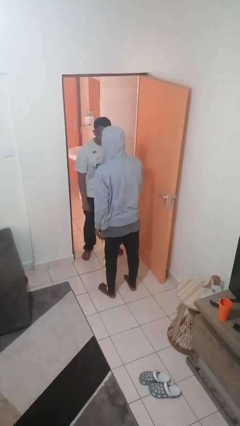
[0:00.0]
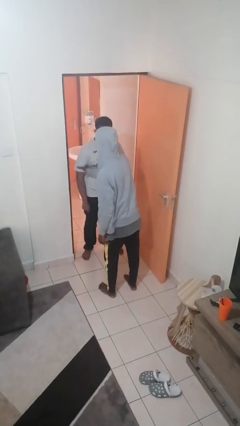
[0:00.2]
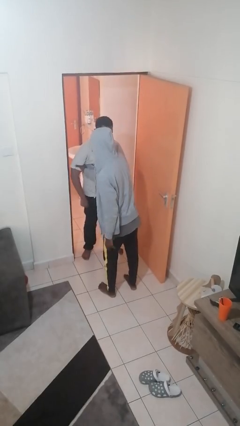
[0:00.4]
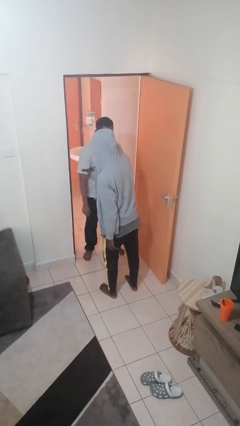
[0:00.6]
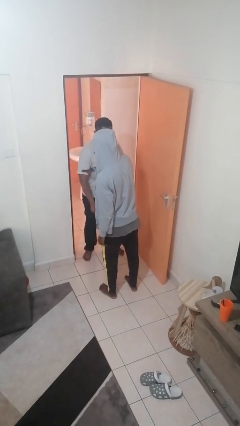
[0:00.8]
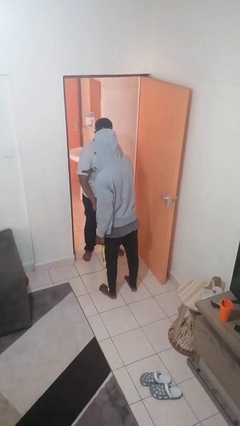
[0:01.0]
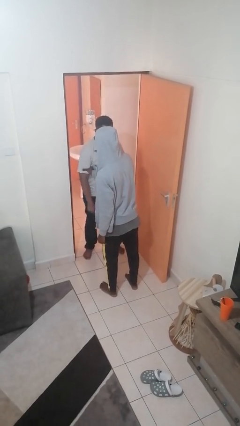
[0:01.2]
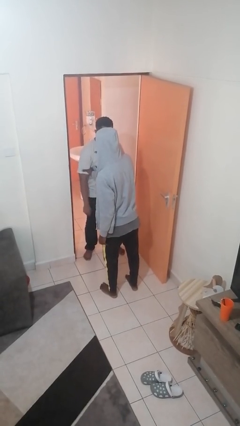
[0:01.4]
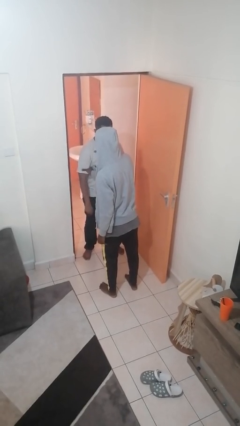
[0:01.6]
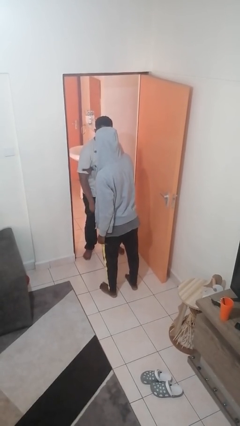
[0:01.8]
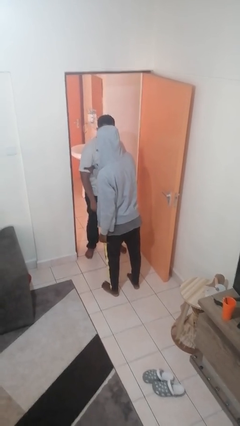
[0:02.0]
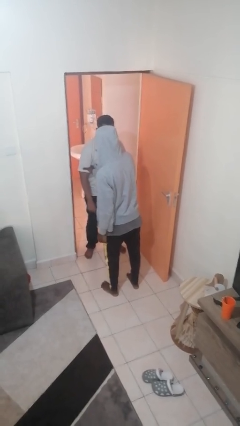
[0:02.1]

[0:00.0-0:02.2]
person grabs person by bicep

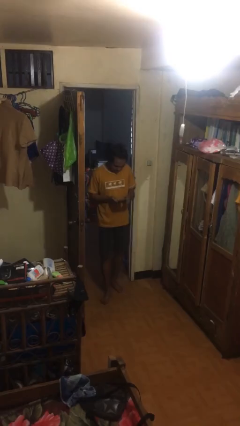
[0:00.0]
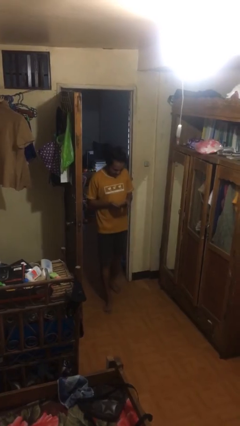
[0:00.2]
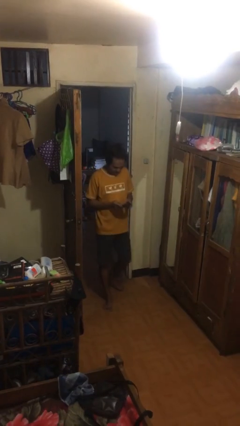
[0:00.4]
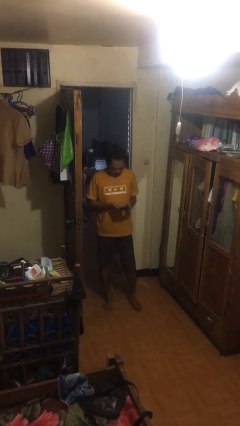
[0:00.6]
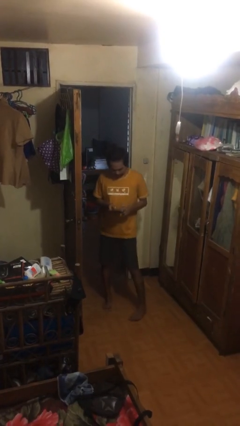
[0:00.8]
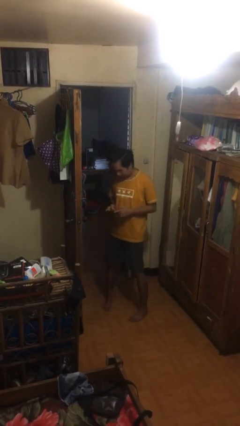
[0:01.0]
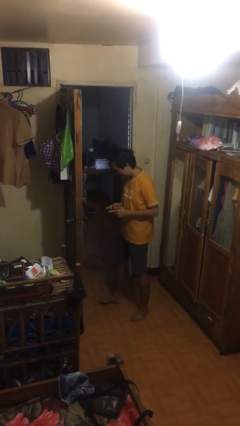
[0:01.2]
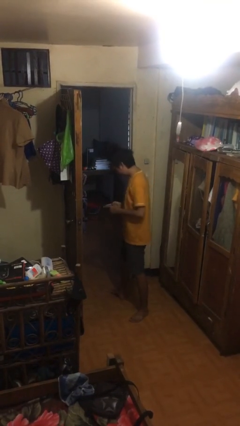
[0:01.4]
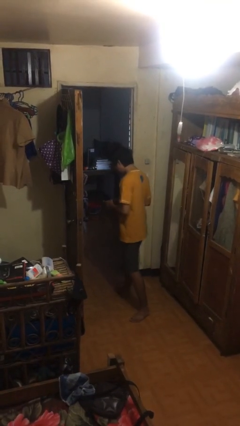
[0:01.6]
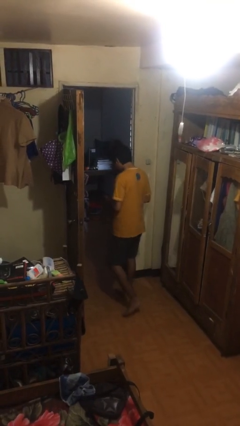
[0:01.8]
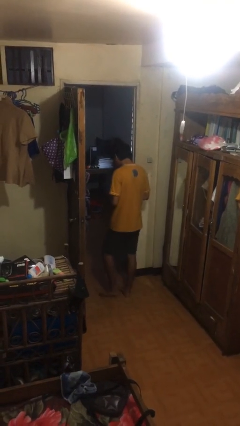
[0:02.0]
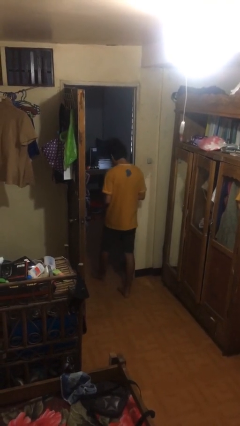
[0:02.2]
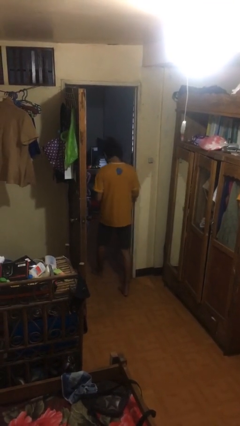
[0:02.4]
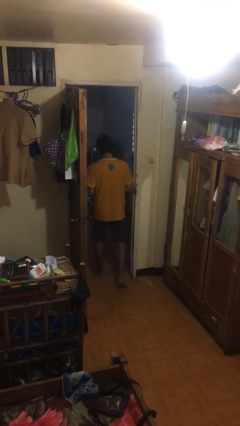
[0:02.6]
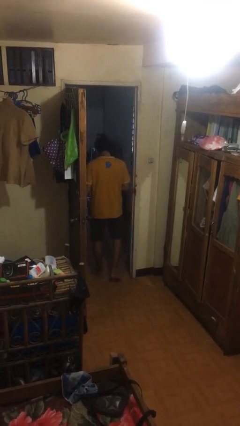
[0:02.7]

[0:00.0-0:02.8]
person exits scene through structure

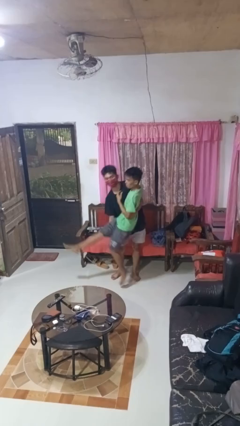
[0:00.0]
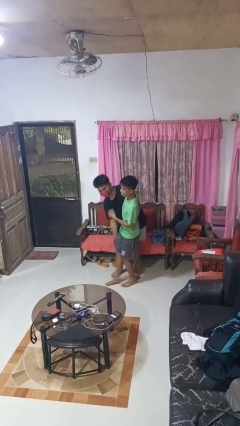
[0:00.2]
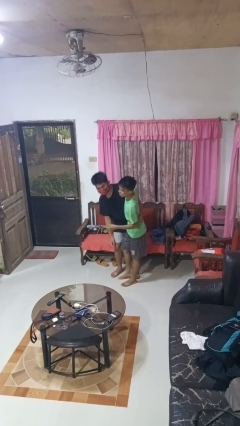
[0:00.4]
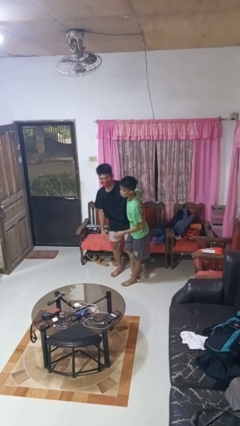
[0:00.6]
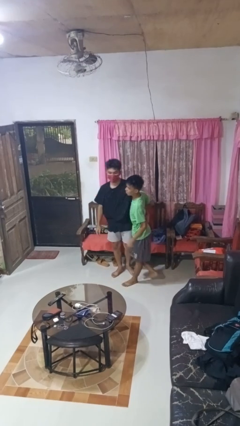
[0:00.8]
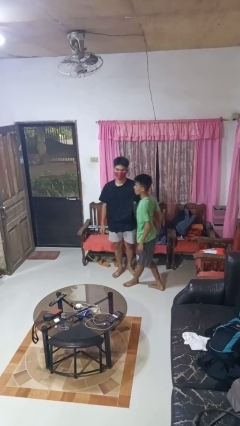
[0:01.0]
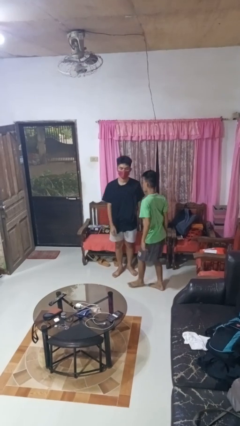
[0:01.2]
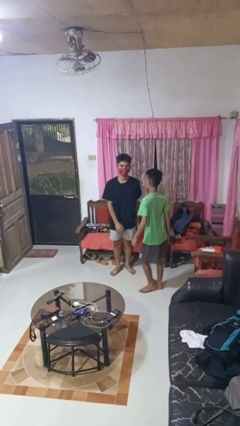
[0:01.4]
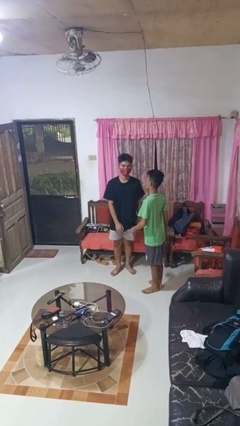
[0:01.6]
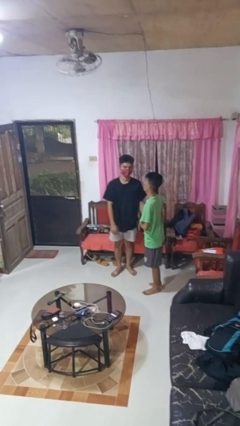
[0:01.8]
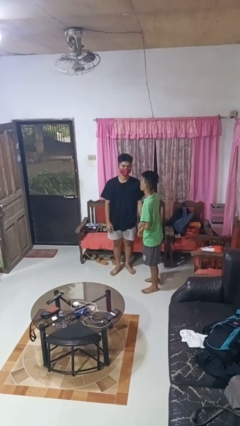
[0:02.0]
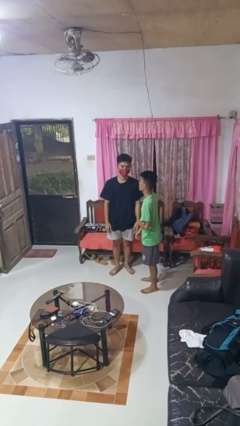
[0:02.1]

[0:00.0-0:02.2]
person puts down person

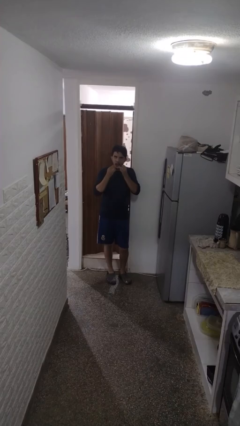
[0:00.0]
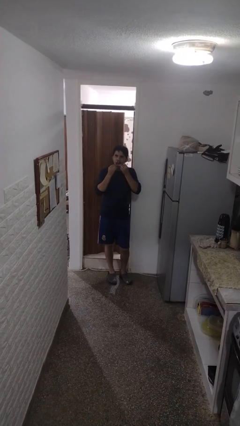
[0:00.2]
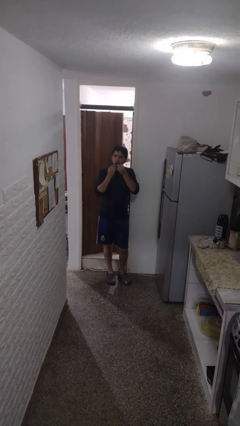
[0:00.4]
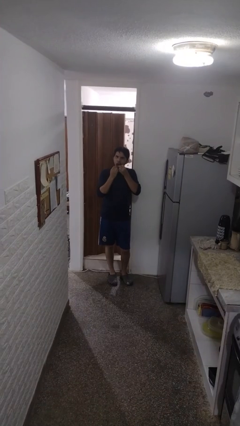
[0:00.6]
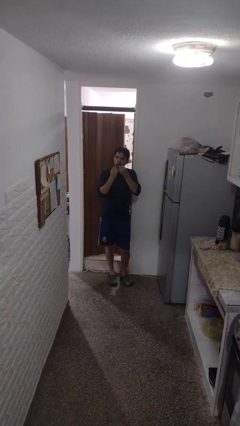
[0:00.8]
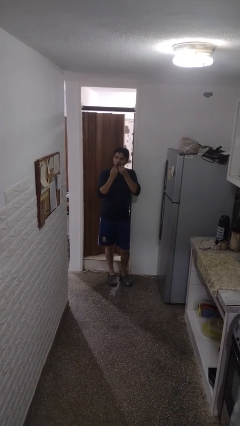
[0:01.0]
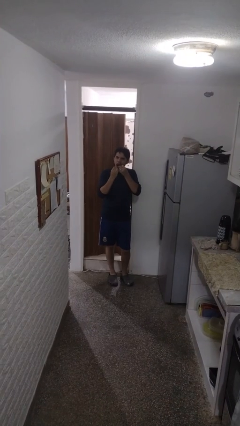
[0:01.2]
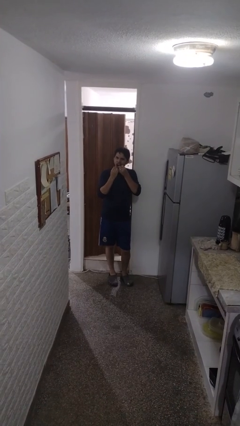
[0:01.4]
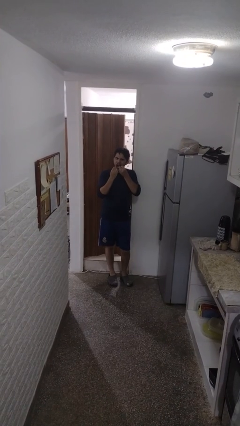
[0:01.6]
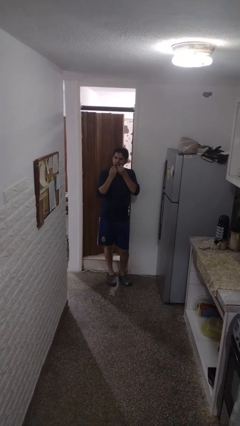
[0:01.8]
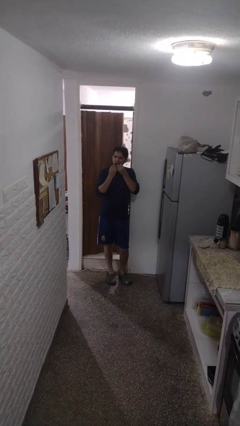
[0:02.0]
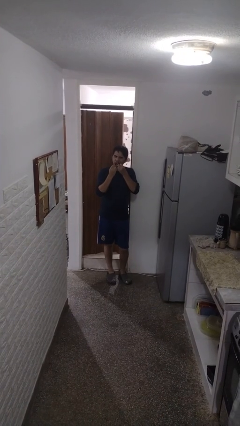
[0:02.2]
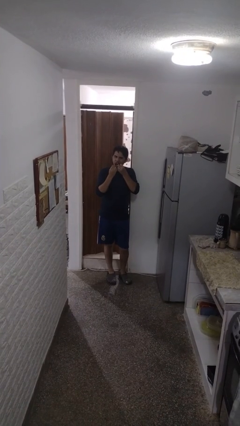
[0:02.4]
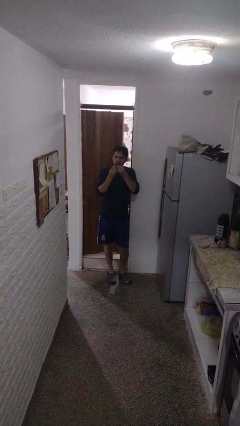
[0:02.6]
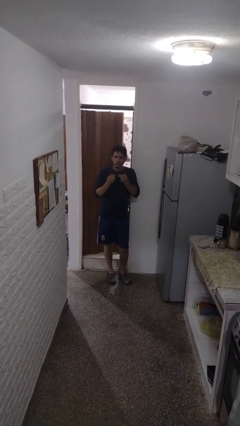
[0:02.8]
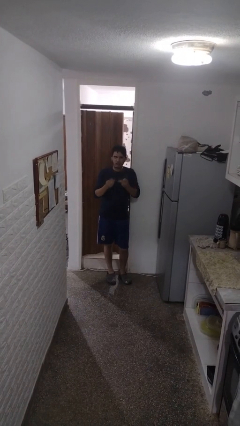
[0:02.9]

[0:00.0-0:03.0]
person flosses

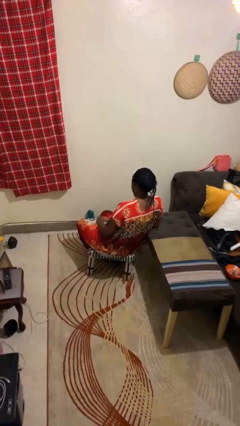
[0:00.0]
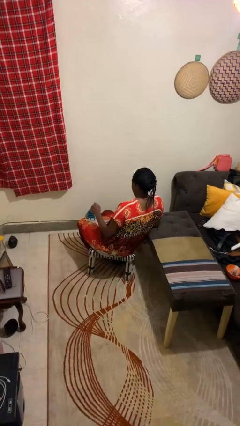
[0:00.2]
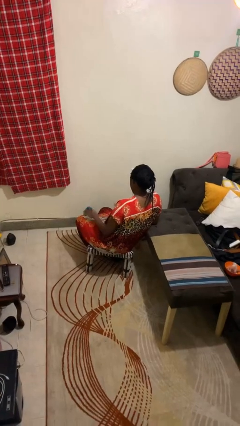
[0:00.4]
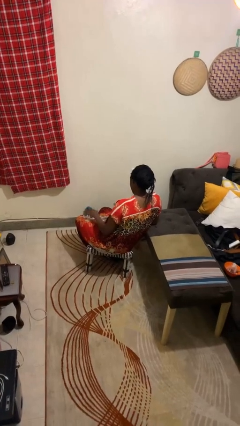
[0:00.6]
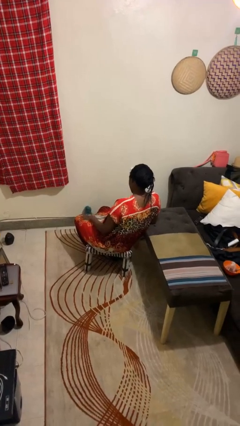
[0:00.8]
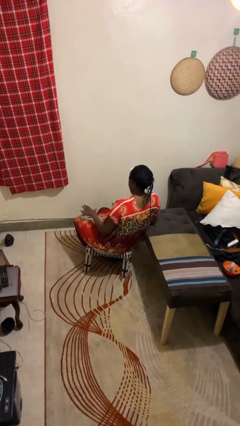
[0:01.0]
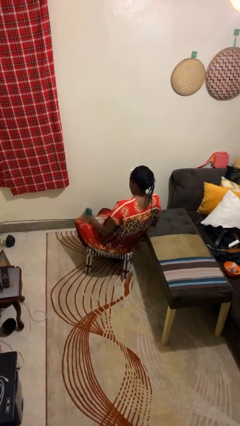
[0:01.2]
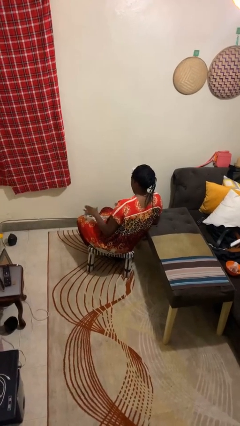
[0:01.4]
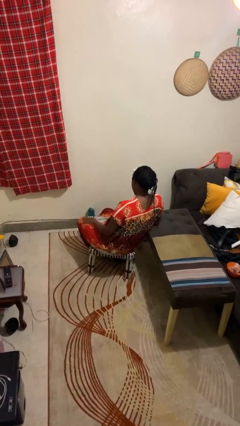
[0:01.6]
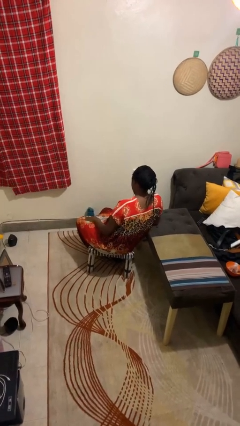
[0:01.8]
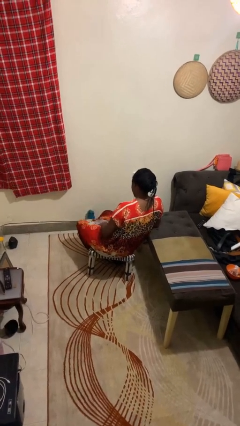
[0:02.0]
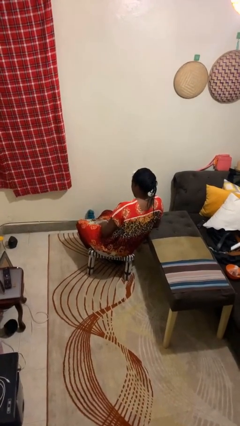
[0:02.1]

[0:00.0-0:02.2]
person slaps hands on thighs

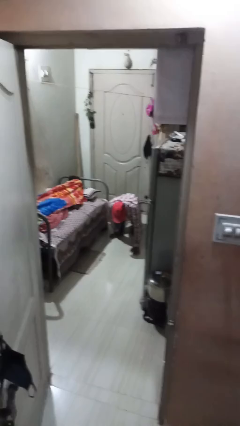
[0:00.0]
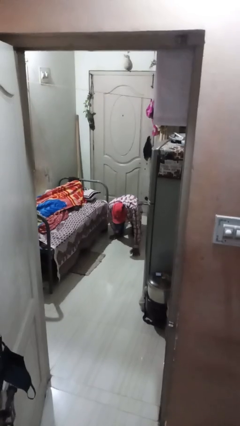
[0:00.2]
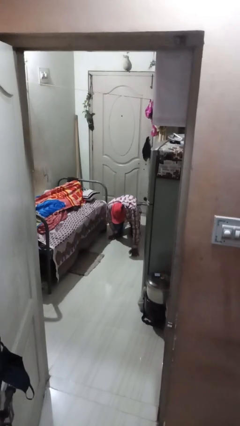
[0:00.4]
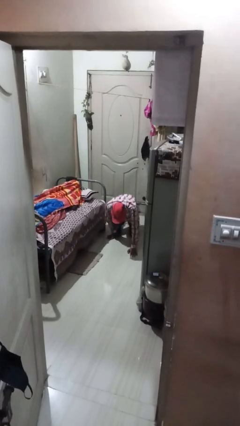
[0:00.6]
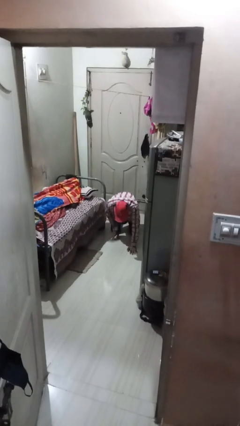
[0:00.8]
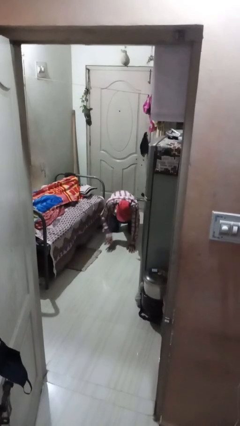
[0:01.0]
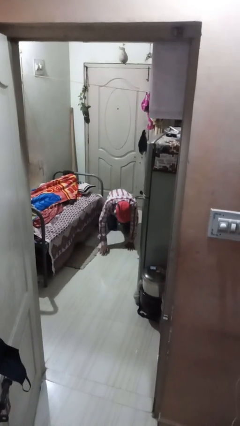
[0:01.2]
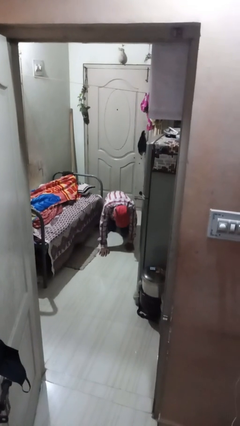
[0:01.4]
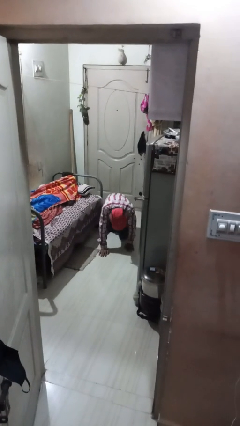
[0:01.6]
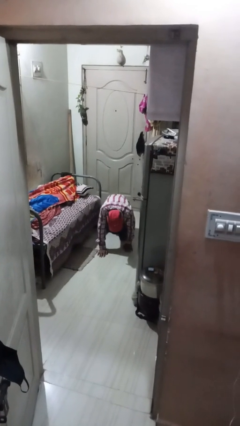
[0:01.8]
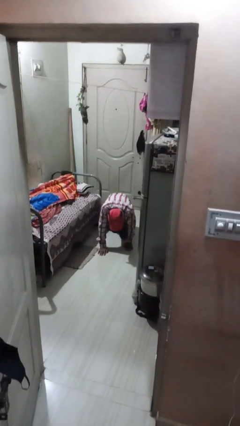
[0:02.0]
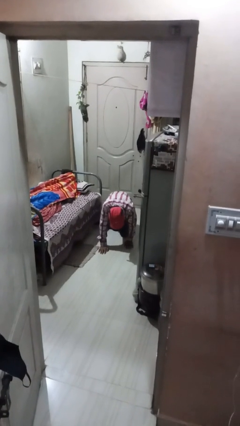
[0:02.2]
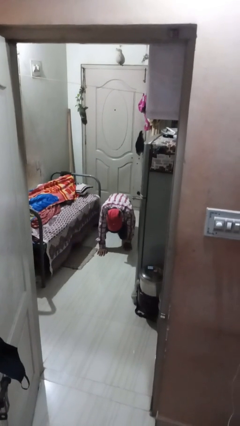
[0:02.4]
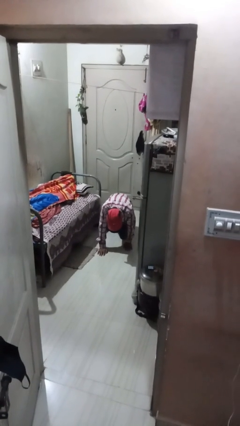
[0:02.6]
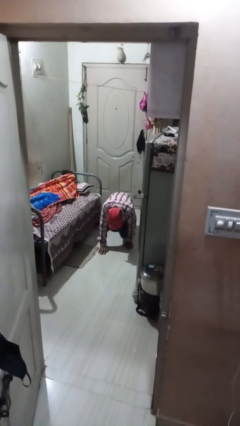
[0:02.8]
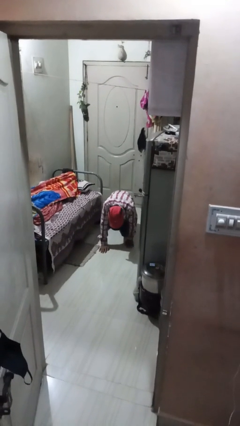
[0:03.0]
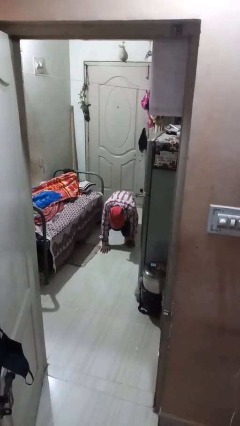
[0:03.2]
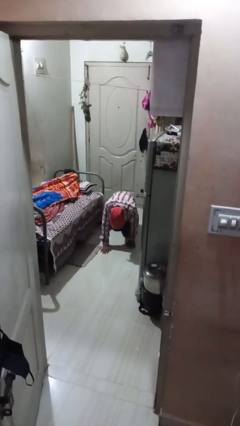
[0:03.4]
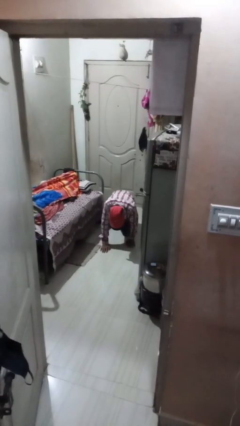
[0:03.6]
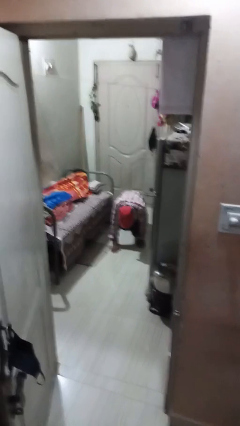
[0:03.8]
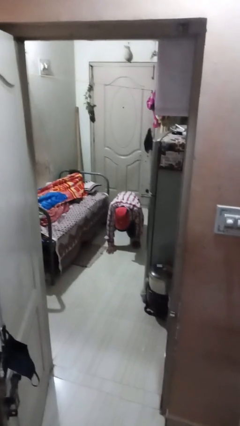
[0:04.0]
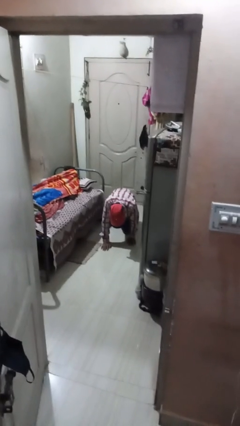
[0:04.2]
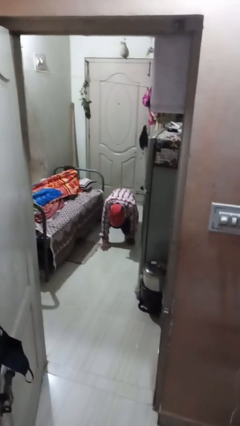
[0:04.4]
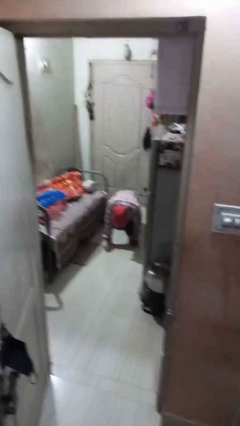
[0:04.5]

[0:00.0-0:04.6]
person crawls

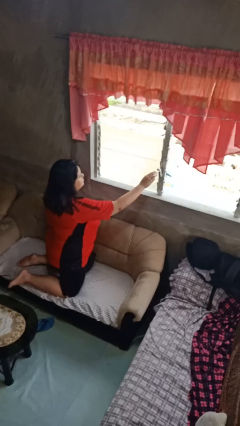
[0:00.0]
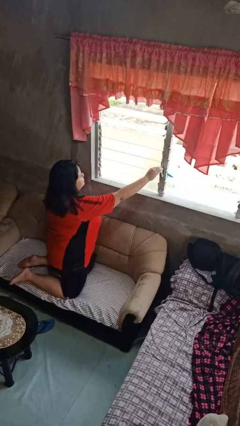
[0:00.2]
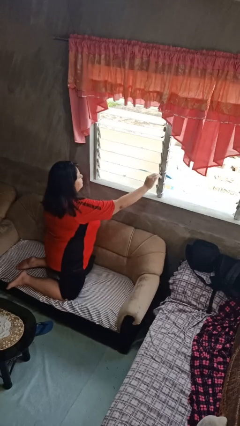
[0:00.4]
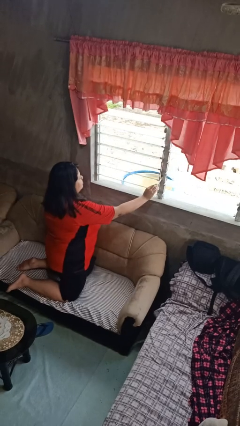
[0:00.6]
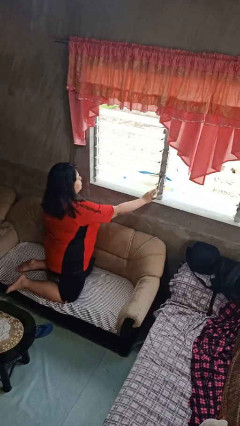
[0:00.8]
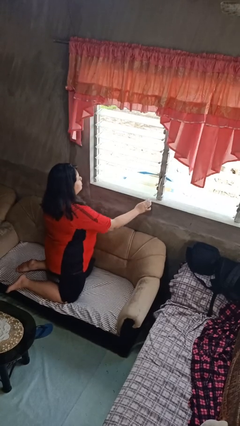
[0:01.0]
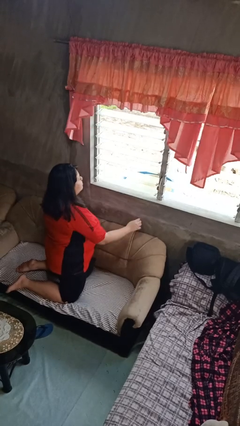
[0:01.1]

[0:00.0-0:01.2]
person opens home window
